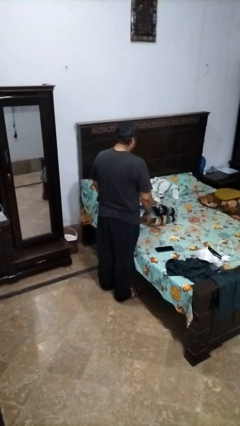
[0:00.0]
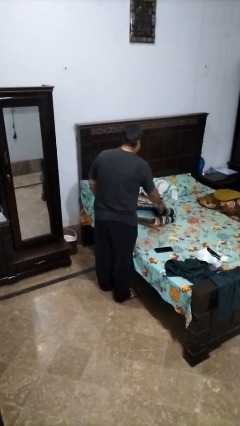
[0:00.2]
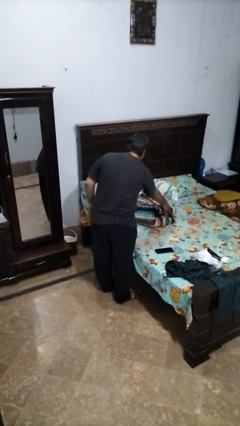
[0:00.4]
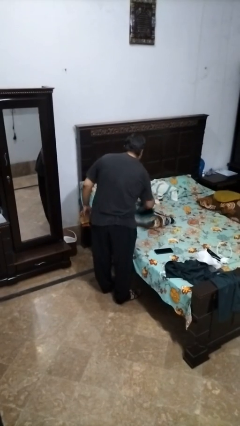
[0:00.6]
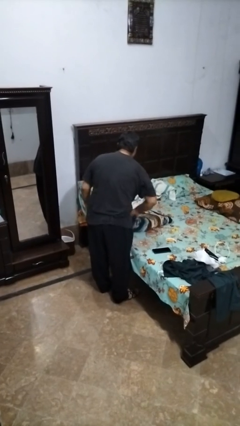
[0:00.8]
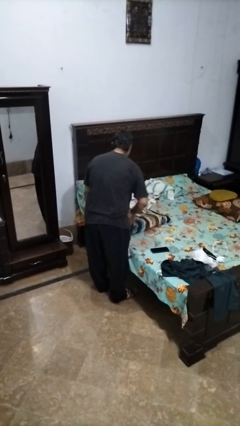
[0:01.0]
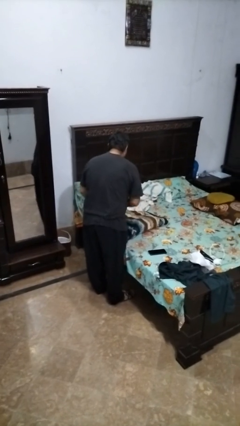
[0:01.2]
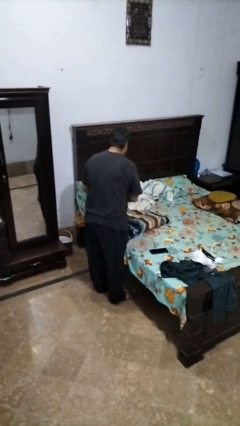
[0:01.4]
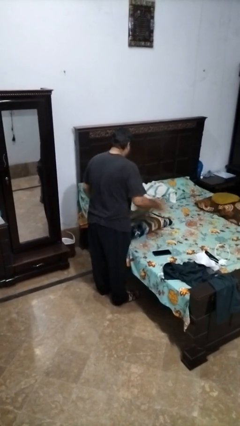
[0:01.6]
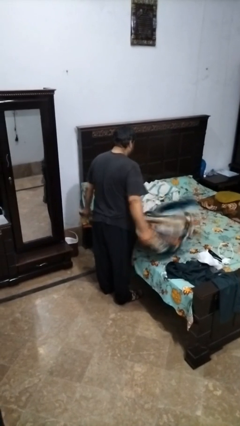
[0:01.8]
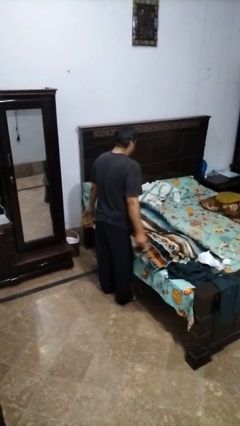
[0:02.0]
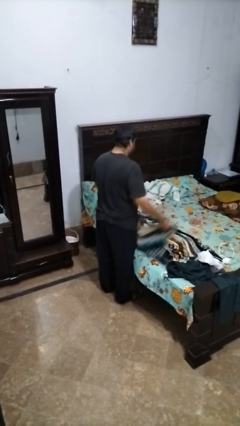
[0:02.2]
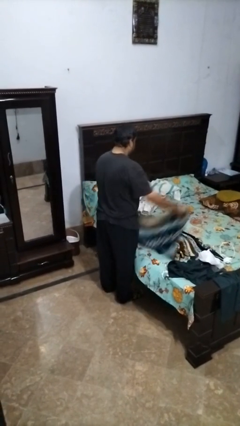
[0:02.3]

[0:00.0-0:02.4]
person unfolds blanket

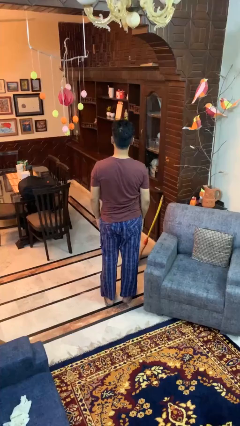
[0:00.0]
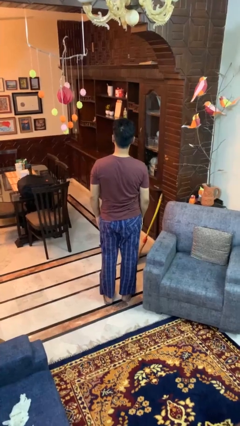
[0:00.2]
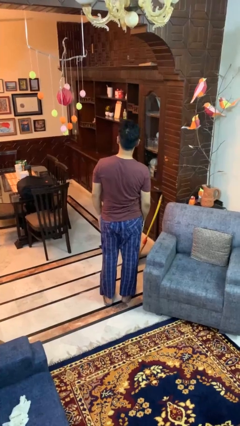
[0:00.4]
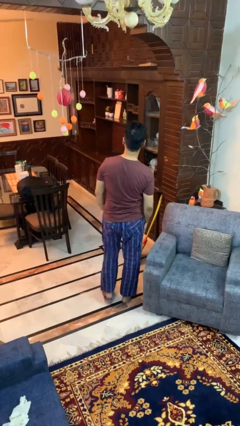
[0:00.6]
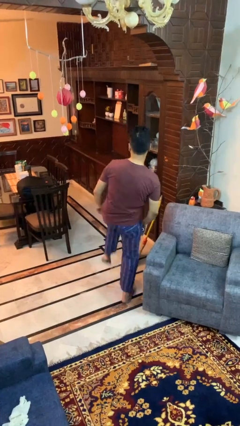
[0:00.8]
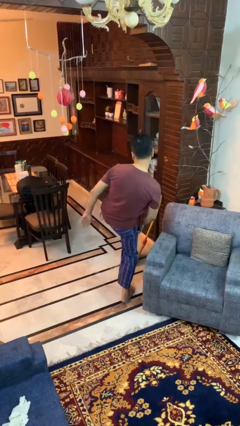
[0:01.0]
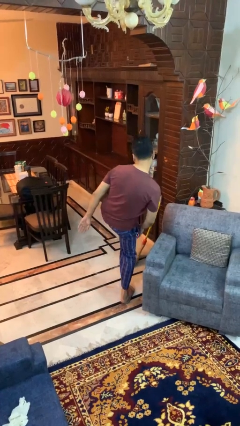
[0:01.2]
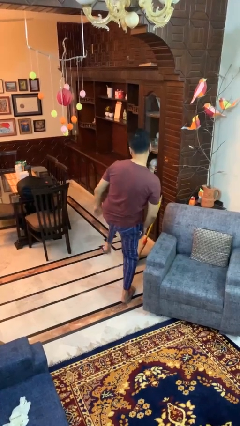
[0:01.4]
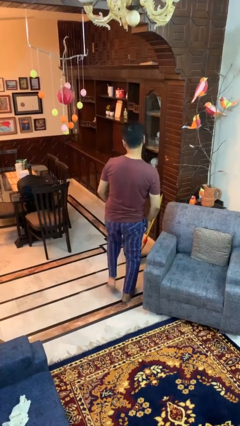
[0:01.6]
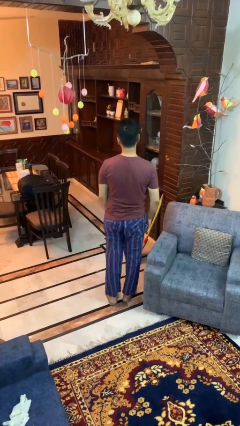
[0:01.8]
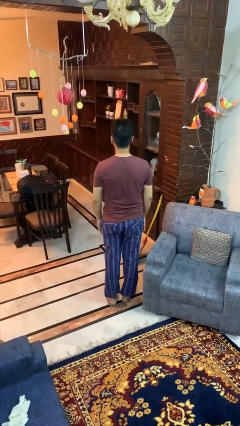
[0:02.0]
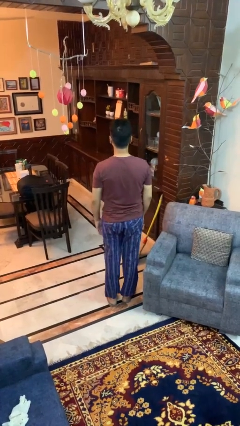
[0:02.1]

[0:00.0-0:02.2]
person karate kicks

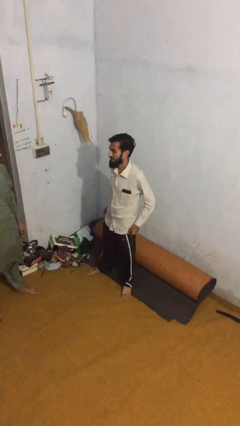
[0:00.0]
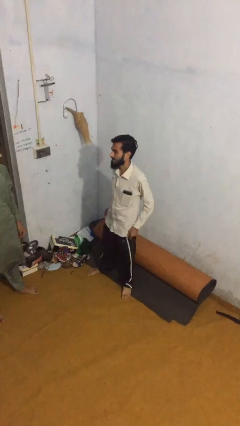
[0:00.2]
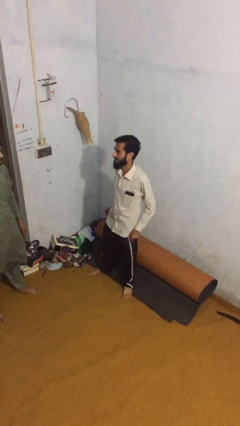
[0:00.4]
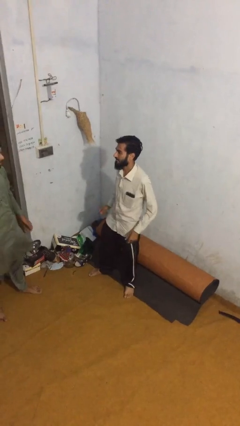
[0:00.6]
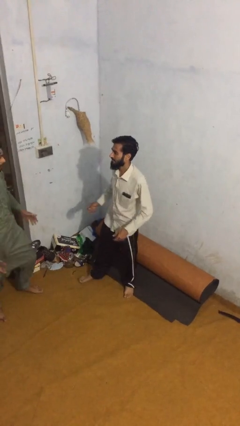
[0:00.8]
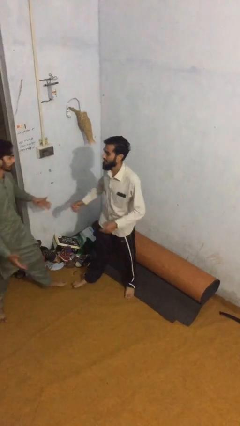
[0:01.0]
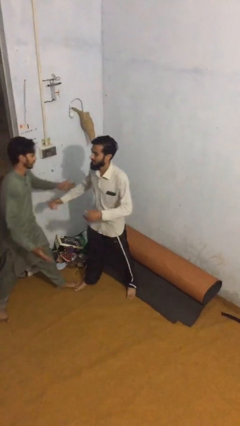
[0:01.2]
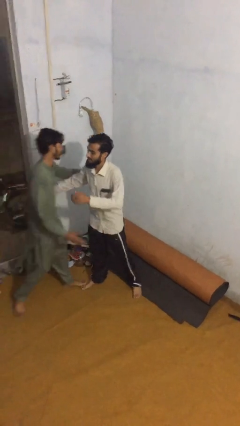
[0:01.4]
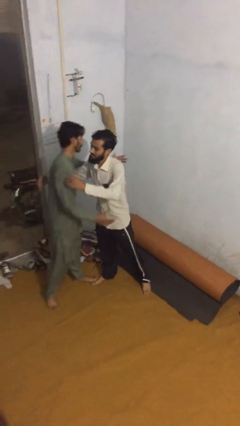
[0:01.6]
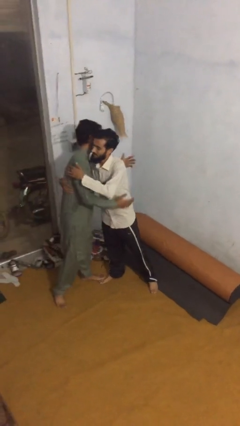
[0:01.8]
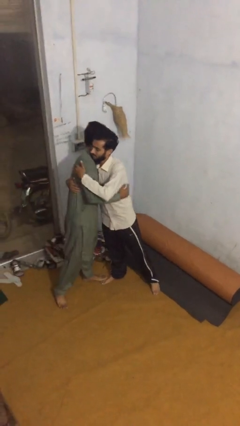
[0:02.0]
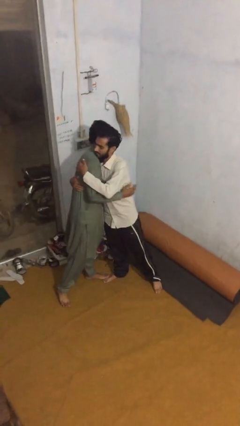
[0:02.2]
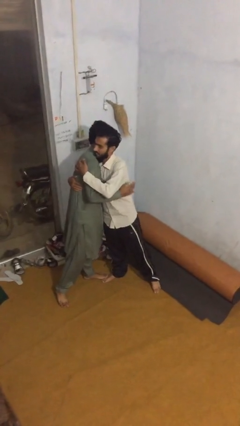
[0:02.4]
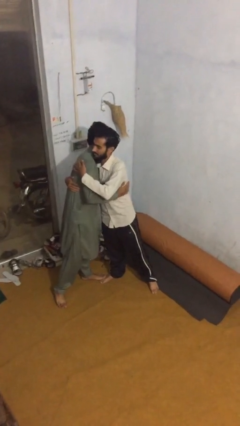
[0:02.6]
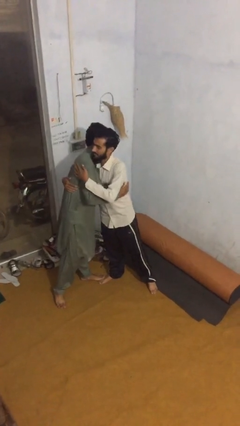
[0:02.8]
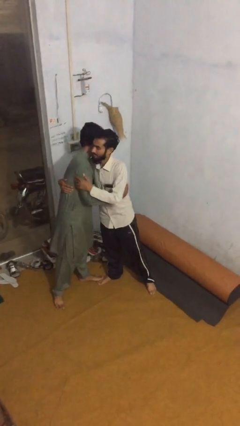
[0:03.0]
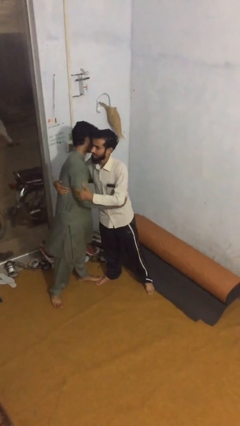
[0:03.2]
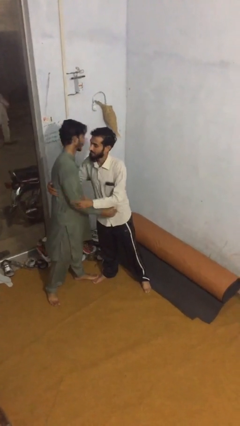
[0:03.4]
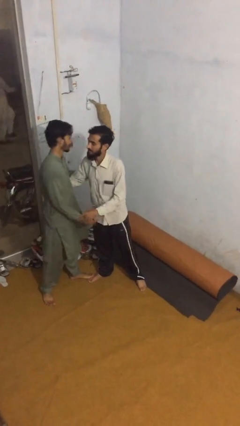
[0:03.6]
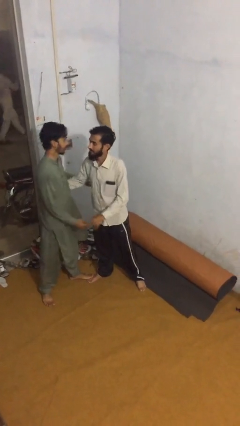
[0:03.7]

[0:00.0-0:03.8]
person embraces person

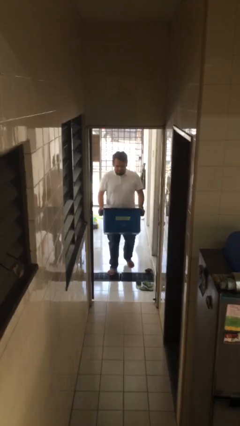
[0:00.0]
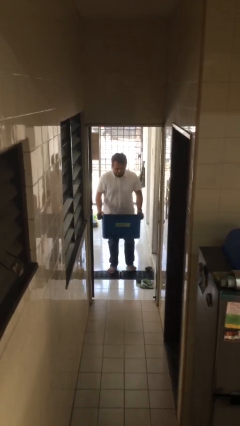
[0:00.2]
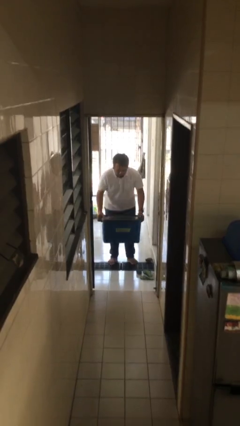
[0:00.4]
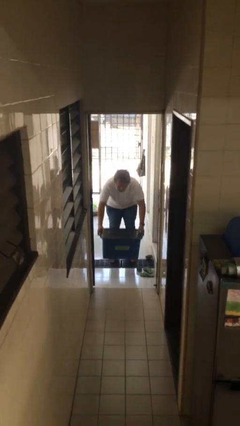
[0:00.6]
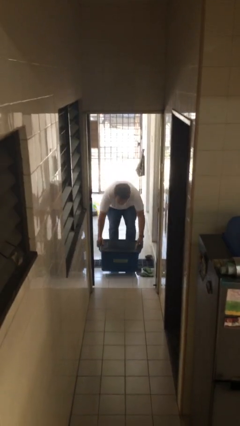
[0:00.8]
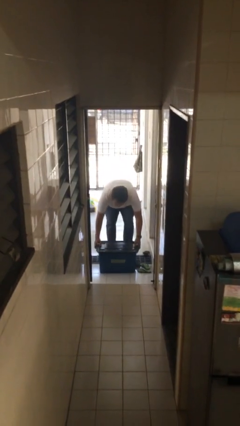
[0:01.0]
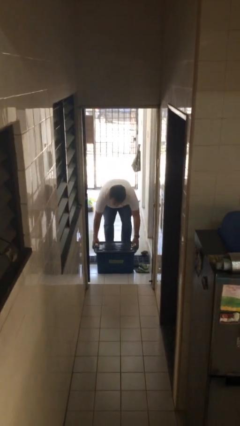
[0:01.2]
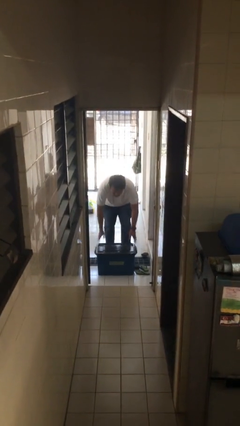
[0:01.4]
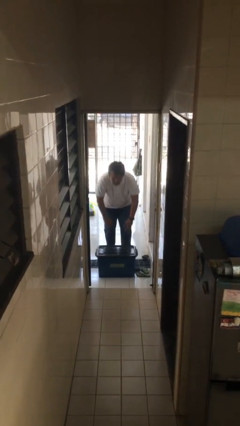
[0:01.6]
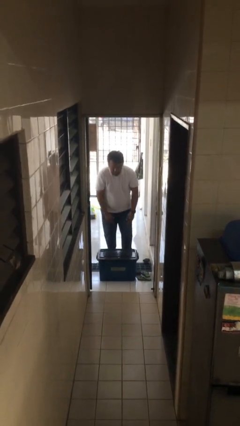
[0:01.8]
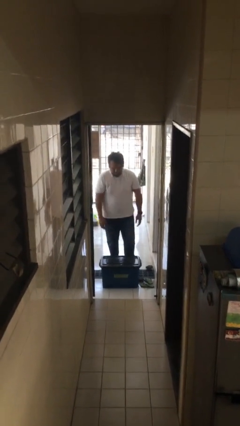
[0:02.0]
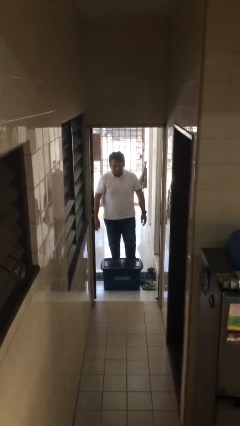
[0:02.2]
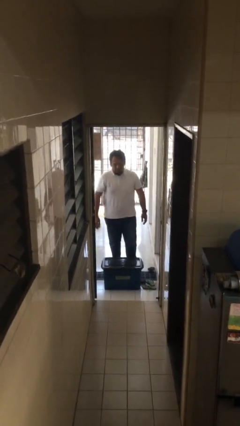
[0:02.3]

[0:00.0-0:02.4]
person puts down object on floor

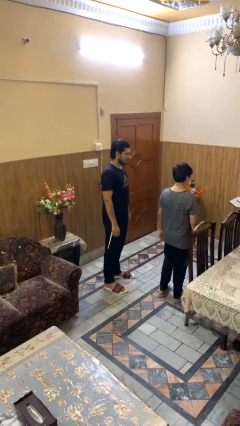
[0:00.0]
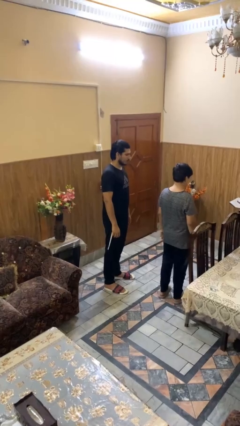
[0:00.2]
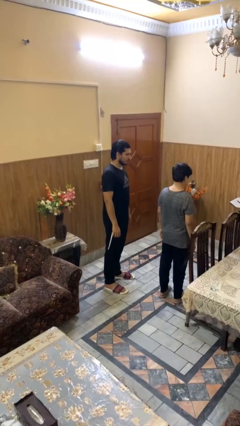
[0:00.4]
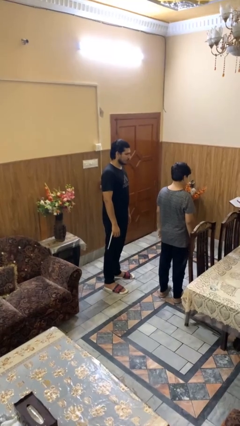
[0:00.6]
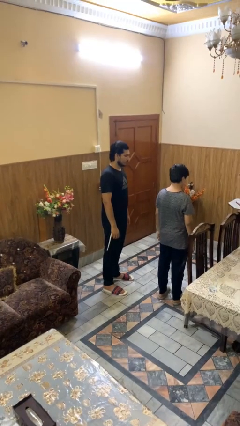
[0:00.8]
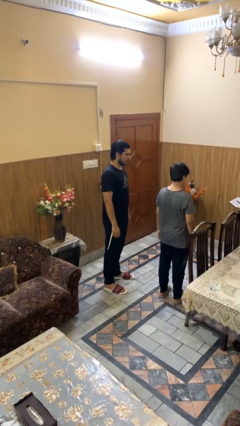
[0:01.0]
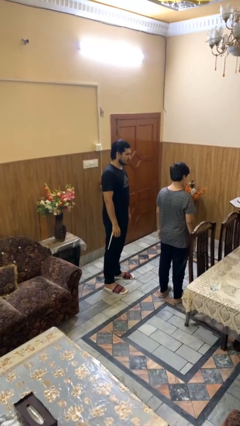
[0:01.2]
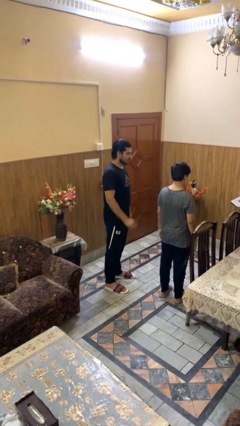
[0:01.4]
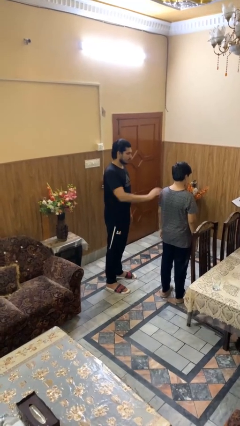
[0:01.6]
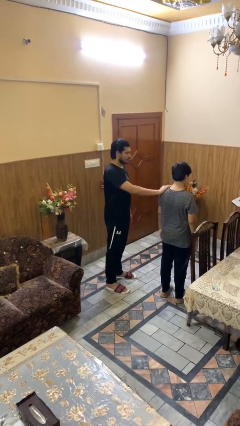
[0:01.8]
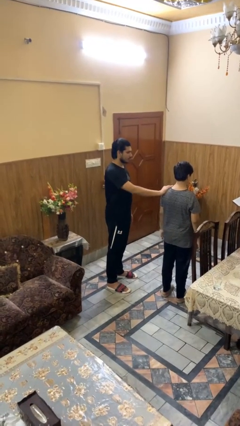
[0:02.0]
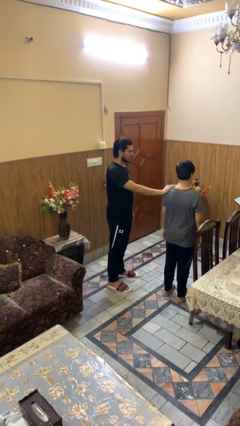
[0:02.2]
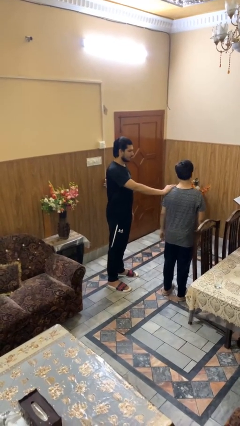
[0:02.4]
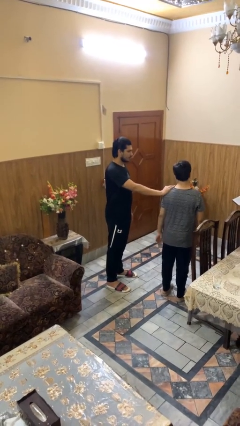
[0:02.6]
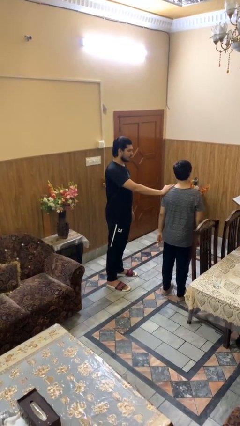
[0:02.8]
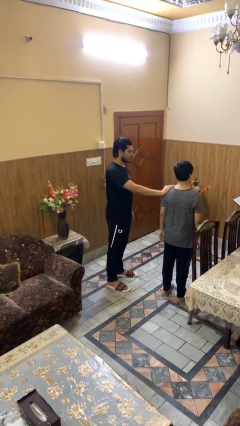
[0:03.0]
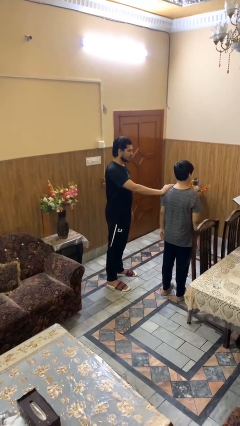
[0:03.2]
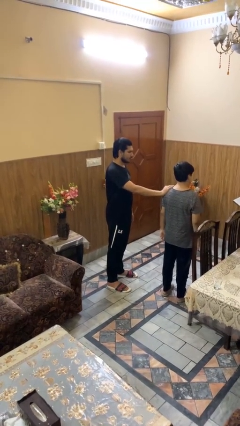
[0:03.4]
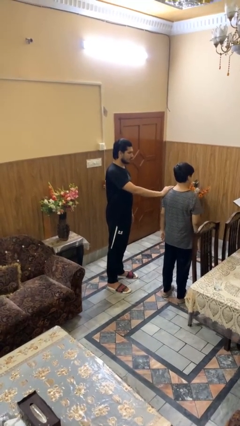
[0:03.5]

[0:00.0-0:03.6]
person grabs person by shoulder

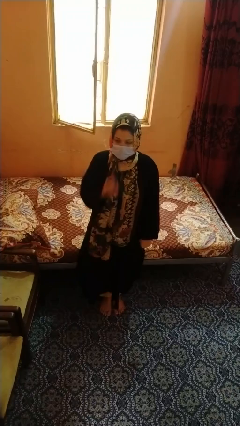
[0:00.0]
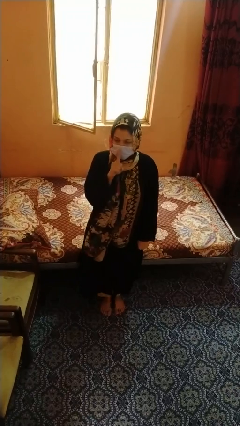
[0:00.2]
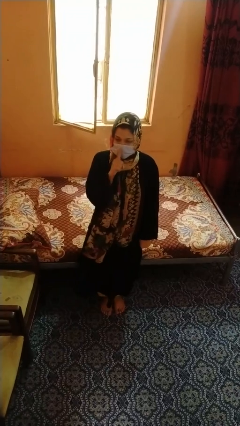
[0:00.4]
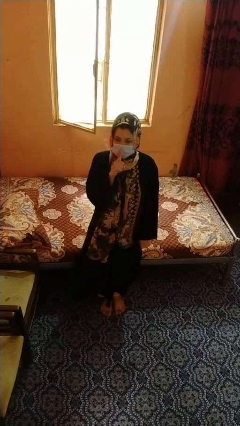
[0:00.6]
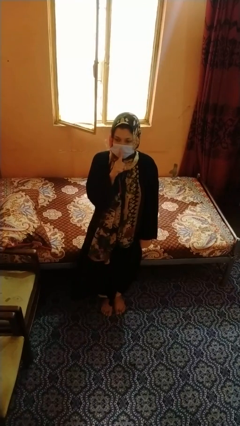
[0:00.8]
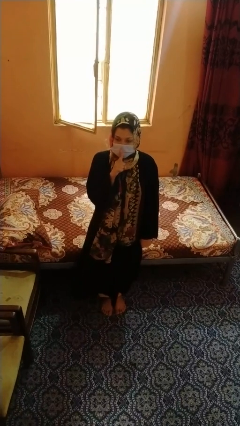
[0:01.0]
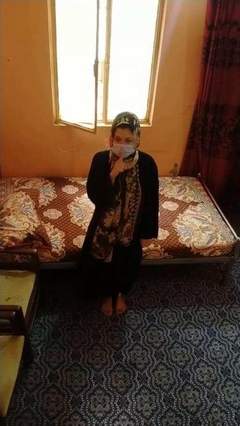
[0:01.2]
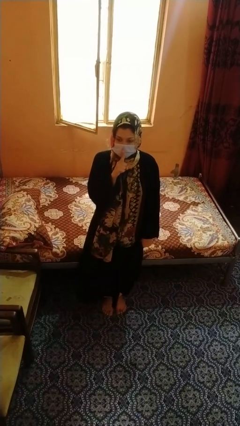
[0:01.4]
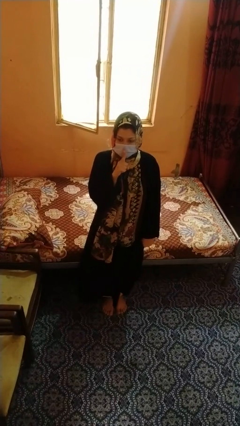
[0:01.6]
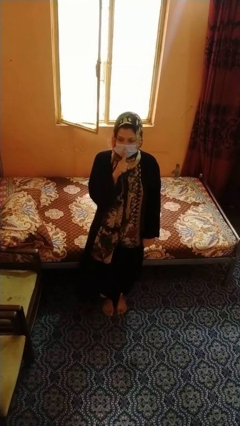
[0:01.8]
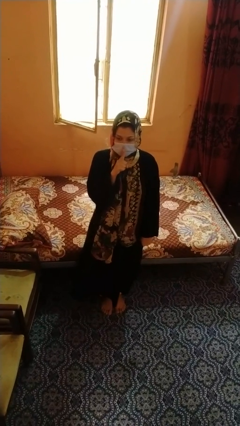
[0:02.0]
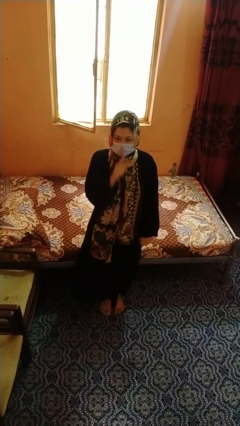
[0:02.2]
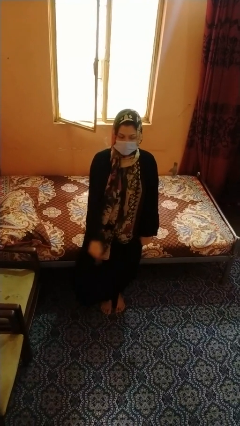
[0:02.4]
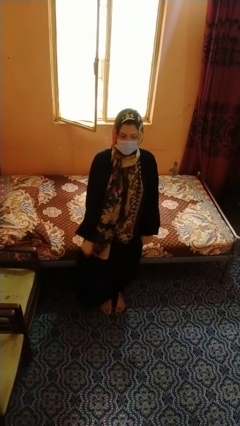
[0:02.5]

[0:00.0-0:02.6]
person gestures be quiet

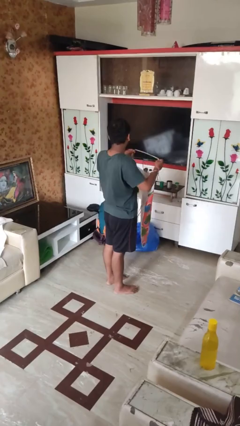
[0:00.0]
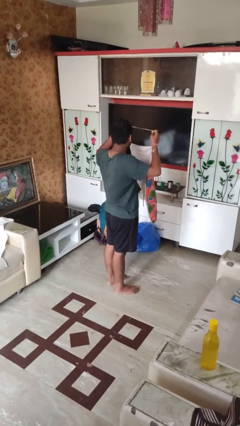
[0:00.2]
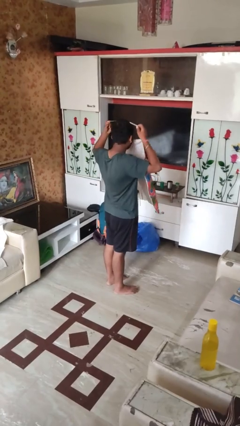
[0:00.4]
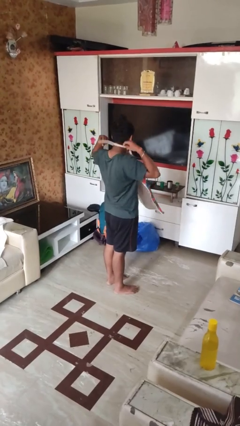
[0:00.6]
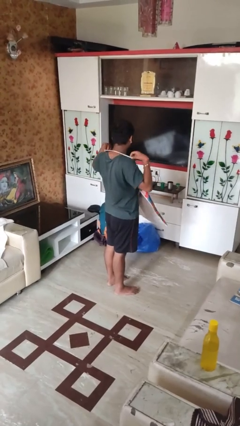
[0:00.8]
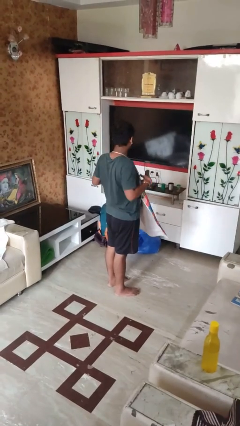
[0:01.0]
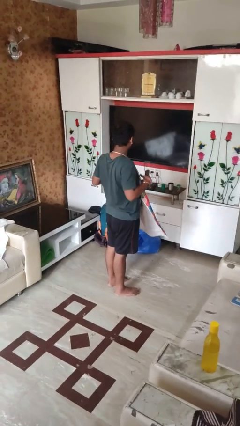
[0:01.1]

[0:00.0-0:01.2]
person puts on apron
